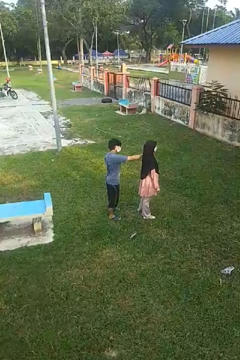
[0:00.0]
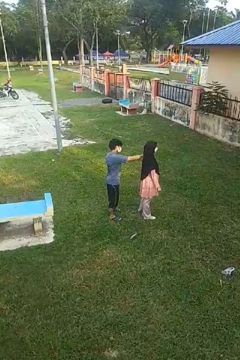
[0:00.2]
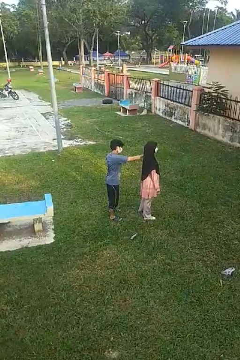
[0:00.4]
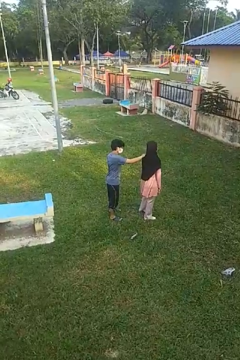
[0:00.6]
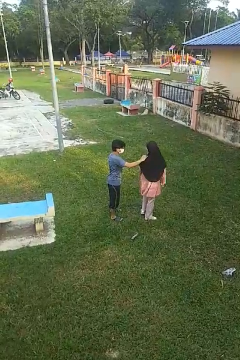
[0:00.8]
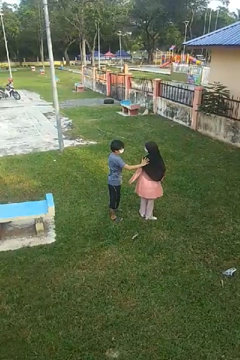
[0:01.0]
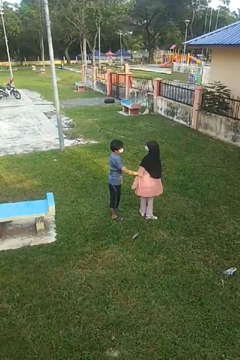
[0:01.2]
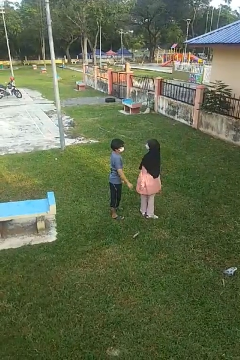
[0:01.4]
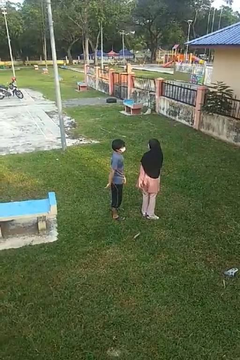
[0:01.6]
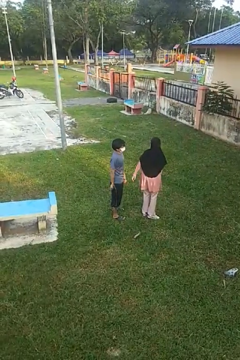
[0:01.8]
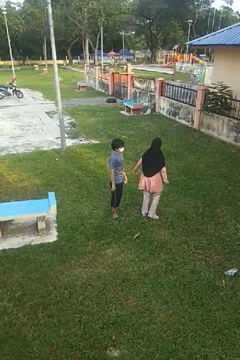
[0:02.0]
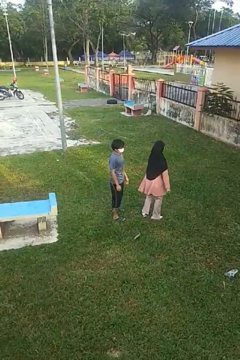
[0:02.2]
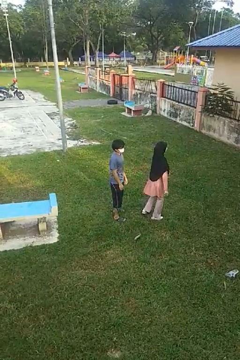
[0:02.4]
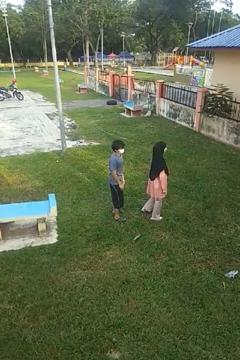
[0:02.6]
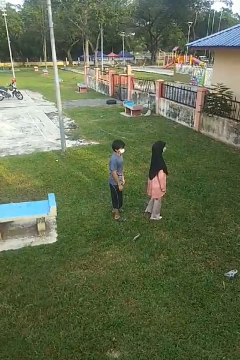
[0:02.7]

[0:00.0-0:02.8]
person spins person around

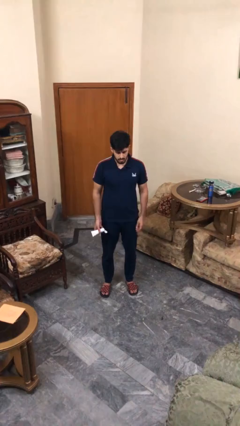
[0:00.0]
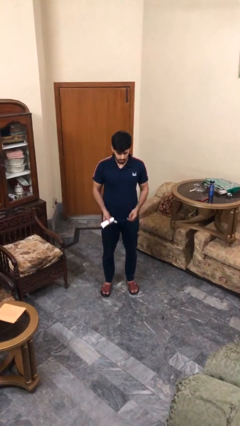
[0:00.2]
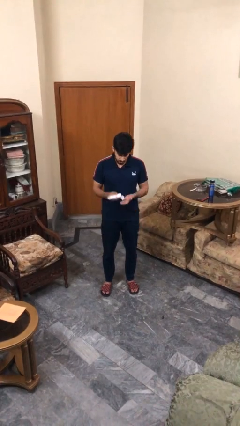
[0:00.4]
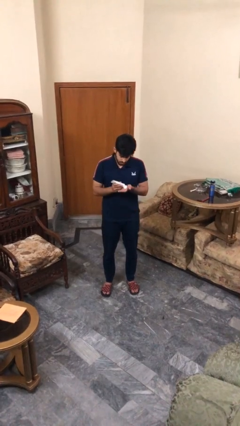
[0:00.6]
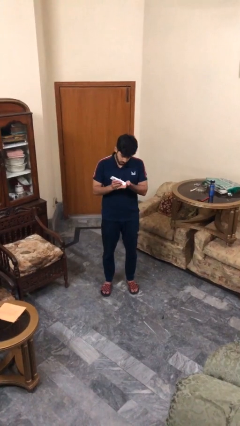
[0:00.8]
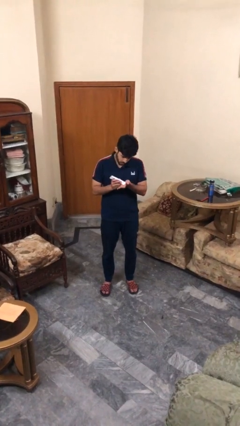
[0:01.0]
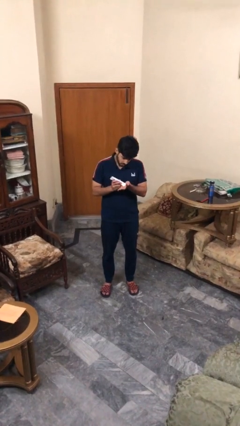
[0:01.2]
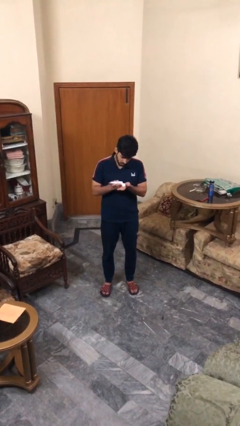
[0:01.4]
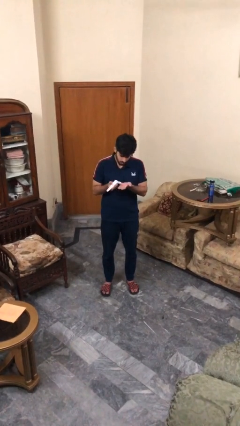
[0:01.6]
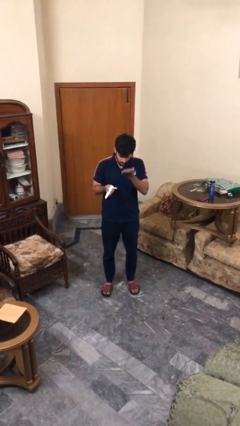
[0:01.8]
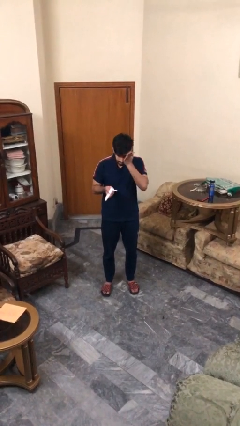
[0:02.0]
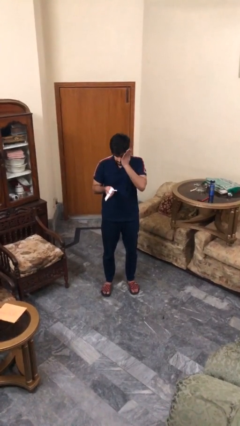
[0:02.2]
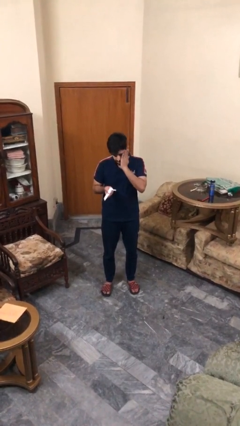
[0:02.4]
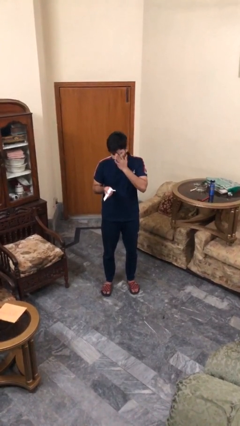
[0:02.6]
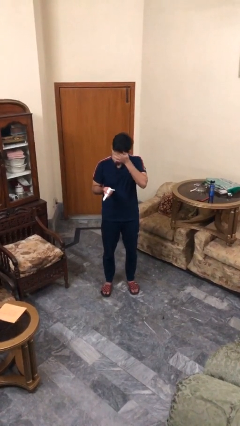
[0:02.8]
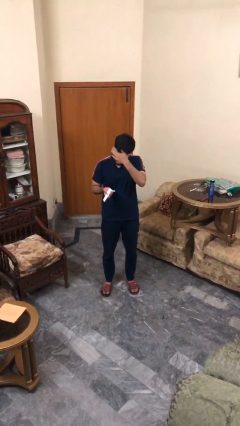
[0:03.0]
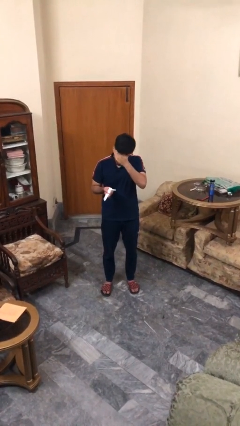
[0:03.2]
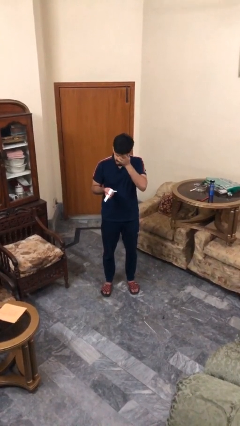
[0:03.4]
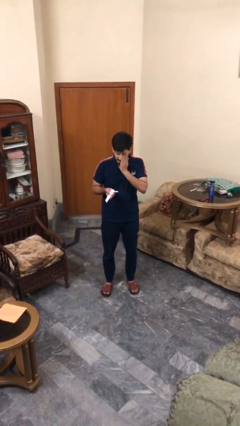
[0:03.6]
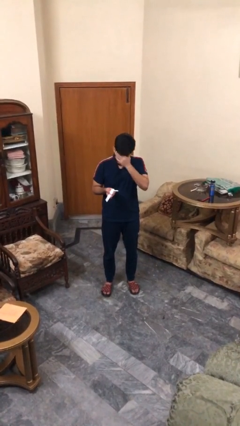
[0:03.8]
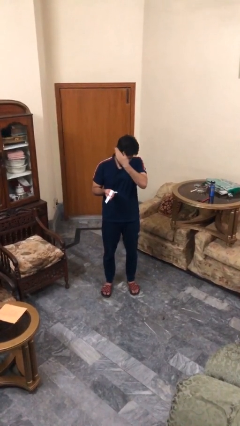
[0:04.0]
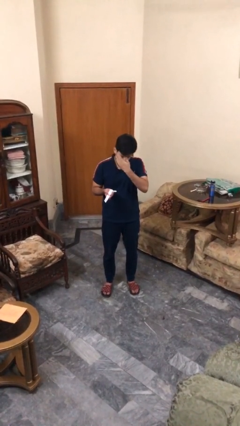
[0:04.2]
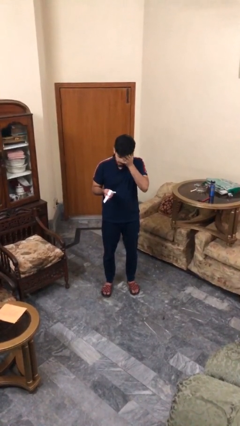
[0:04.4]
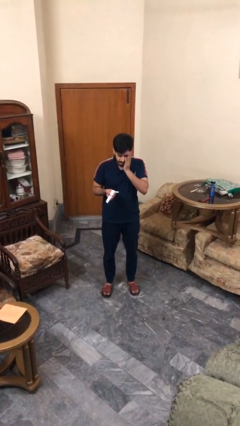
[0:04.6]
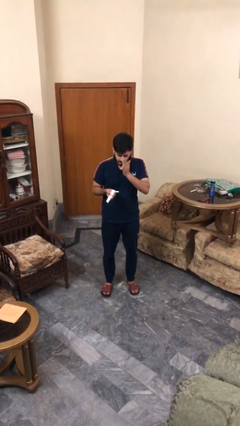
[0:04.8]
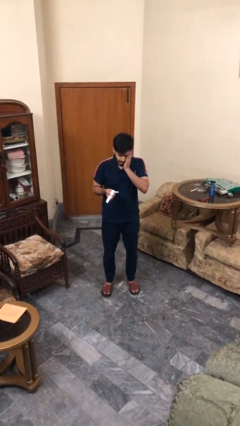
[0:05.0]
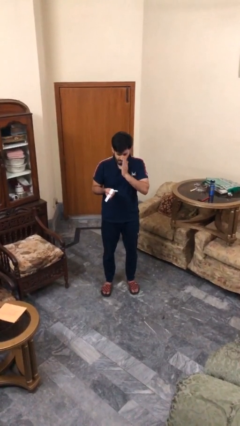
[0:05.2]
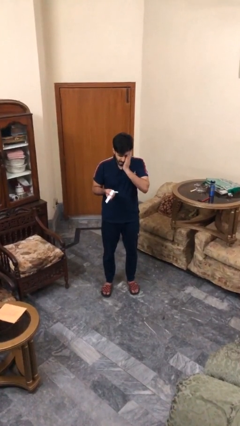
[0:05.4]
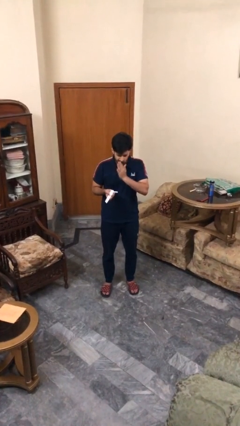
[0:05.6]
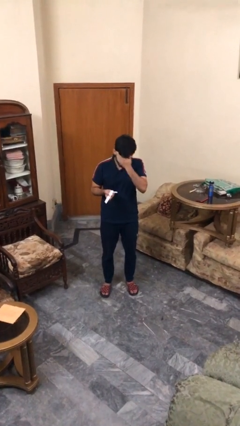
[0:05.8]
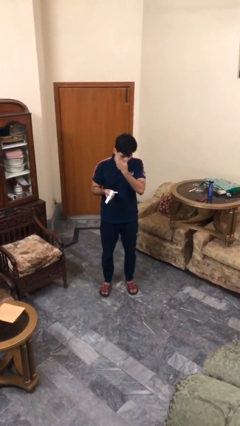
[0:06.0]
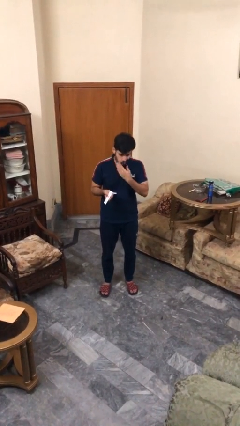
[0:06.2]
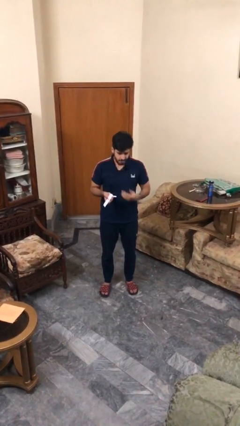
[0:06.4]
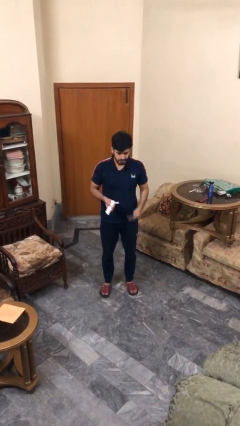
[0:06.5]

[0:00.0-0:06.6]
person applies facial moisturizer

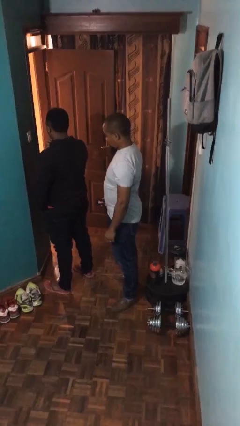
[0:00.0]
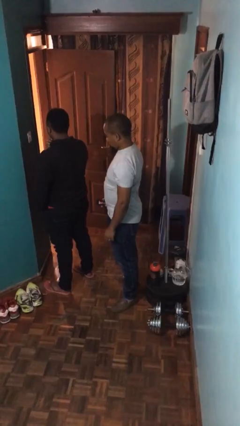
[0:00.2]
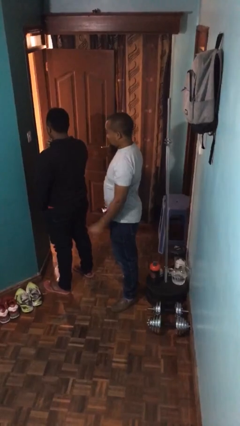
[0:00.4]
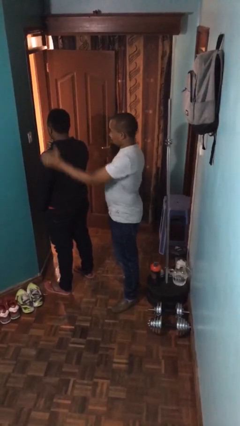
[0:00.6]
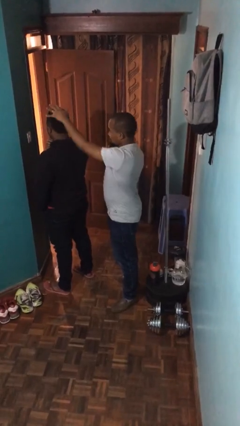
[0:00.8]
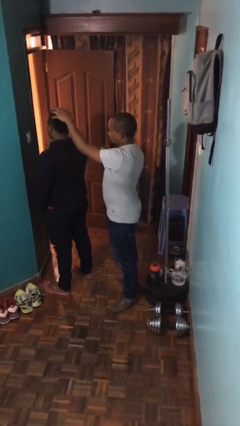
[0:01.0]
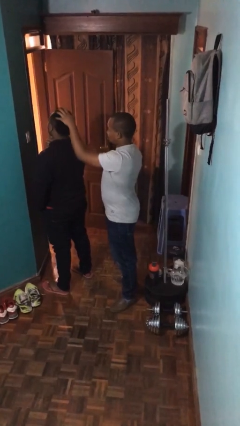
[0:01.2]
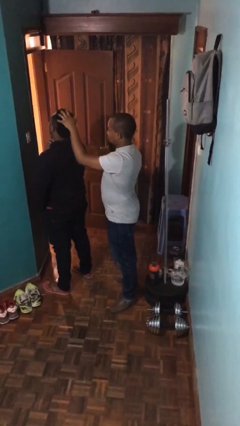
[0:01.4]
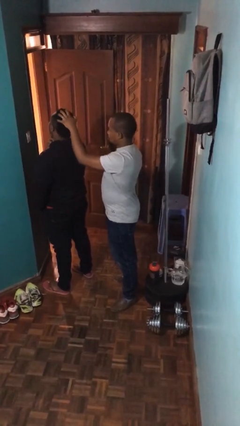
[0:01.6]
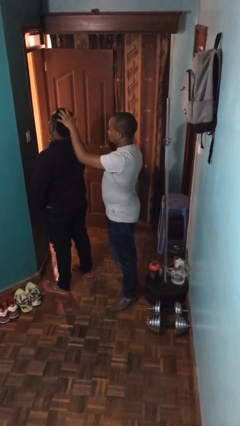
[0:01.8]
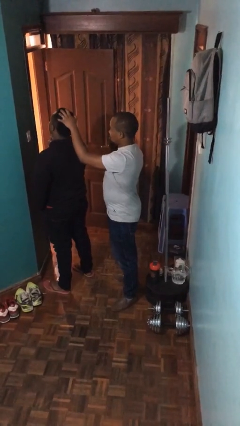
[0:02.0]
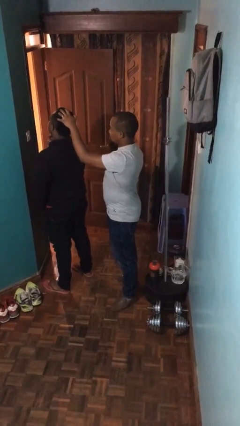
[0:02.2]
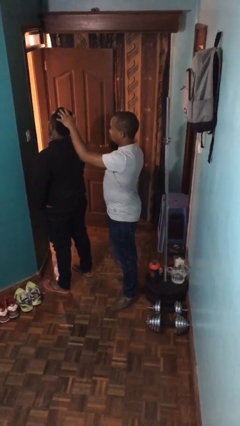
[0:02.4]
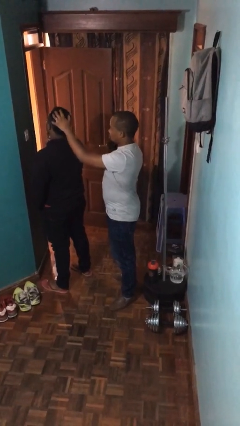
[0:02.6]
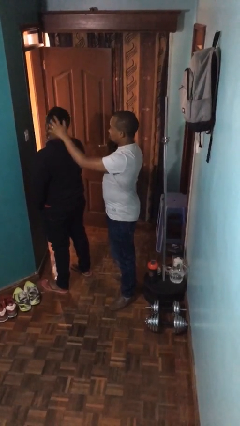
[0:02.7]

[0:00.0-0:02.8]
person grabs person by hair

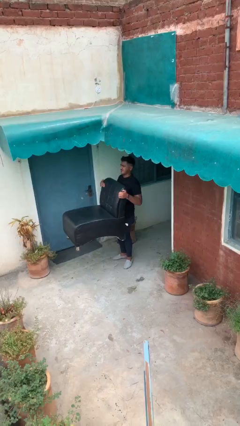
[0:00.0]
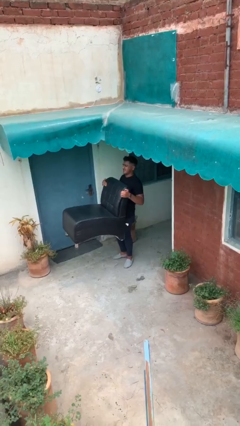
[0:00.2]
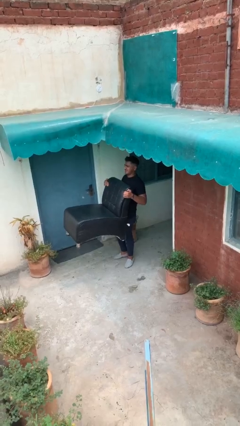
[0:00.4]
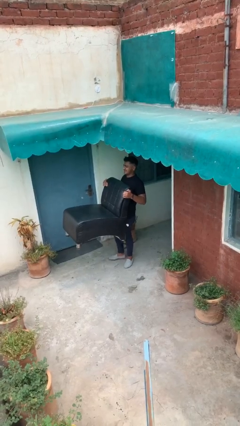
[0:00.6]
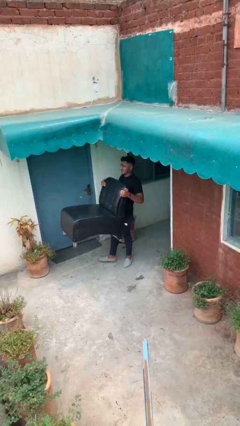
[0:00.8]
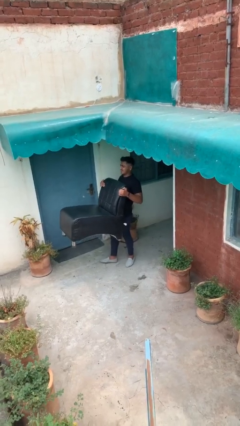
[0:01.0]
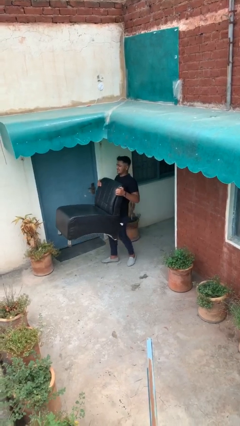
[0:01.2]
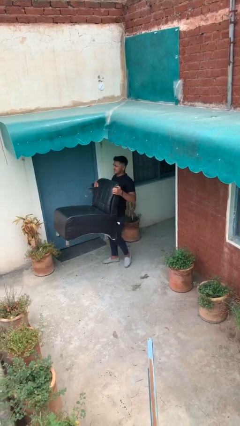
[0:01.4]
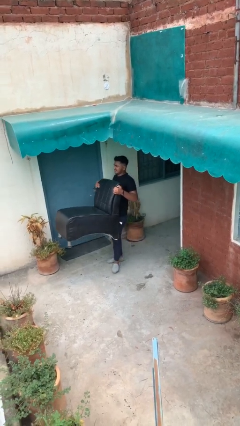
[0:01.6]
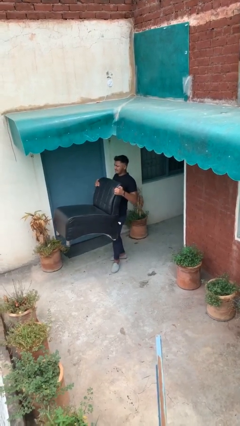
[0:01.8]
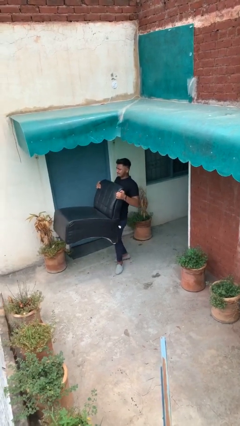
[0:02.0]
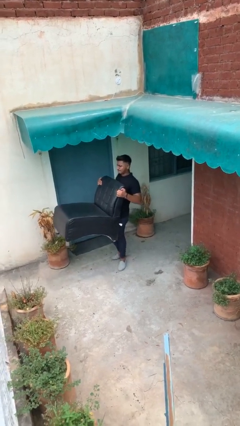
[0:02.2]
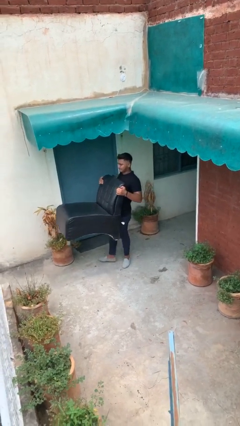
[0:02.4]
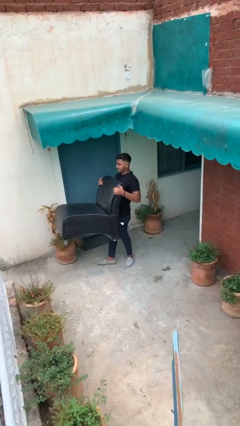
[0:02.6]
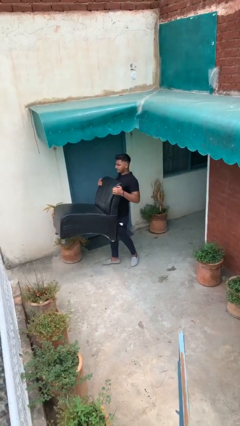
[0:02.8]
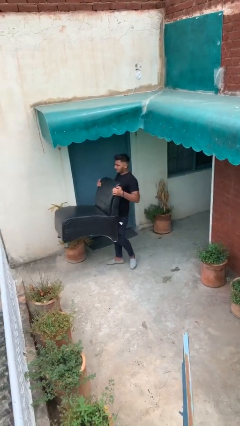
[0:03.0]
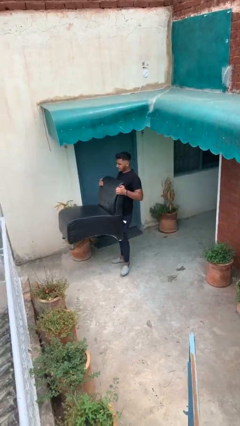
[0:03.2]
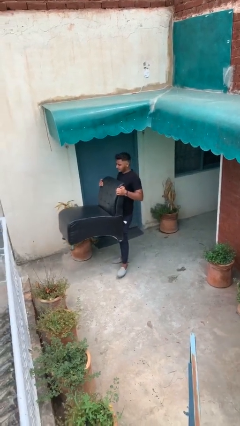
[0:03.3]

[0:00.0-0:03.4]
person carries heavy object

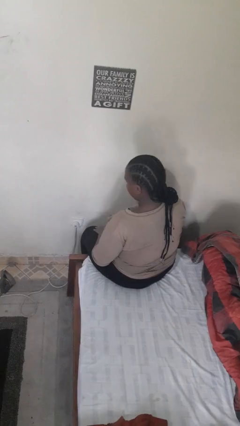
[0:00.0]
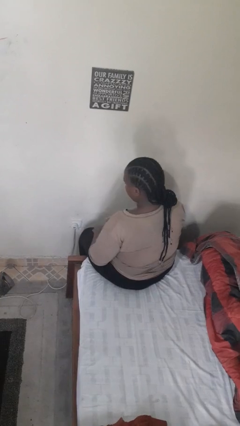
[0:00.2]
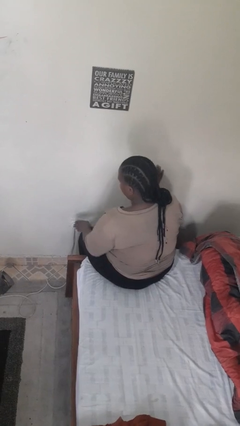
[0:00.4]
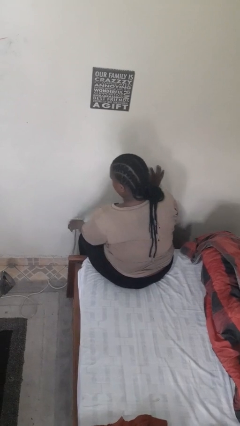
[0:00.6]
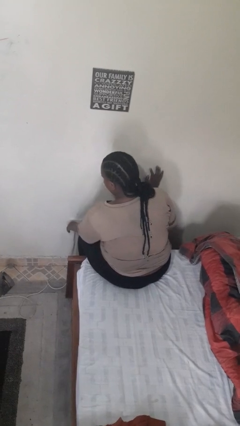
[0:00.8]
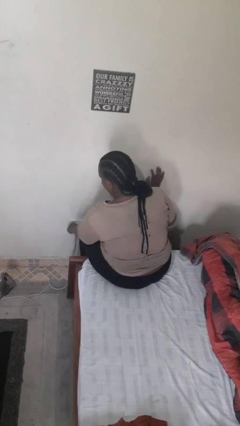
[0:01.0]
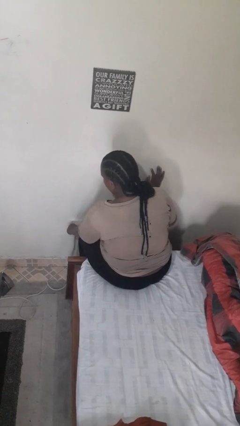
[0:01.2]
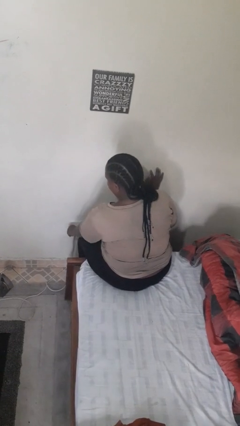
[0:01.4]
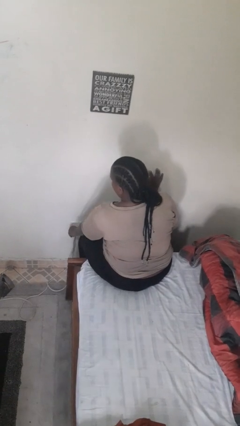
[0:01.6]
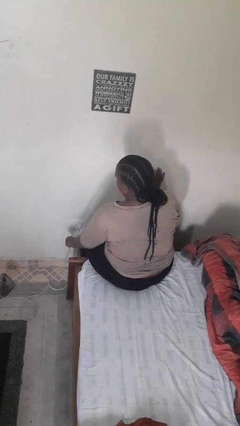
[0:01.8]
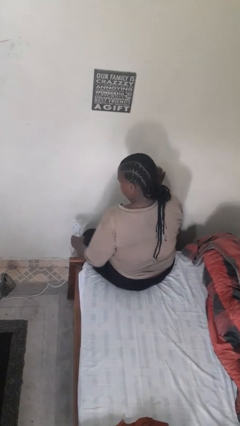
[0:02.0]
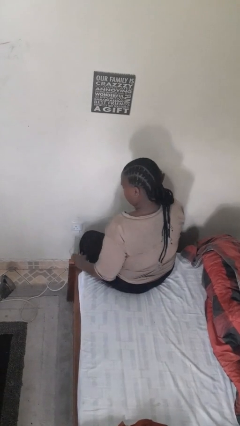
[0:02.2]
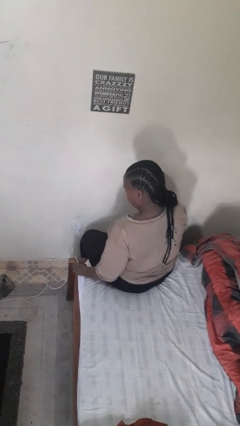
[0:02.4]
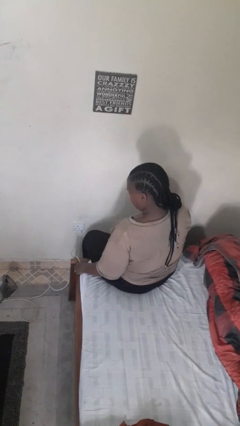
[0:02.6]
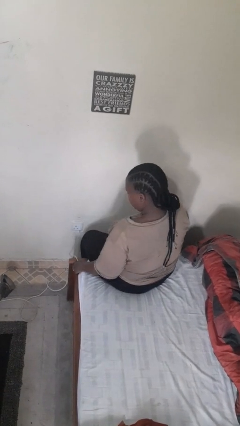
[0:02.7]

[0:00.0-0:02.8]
person unplugs from electrical socket
